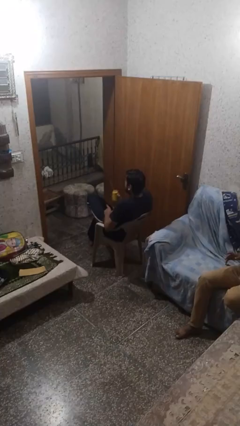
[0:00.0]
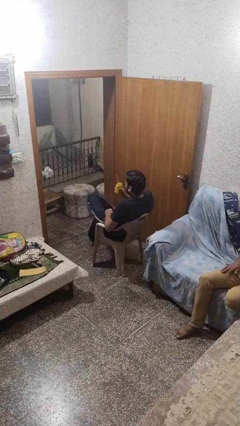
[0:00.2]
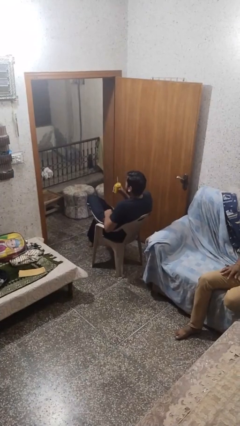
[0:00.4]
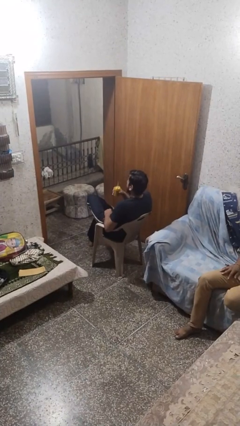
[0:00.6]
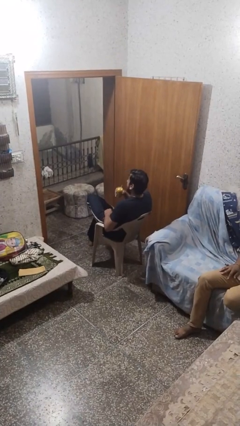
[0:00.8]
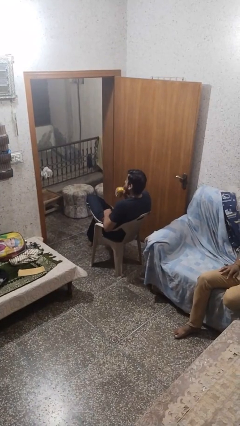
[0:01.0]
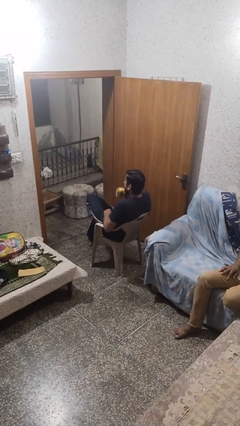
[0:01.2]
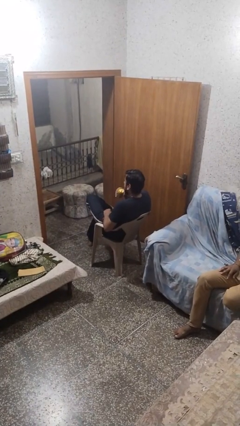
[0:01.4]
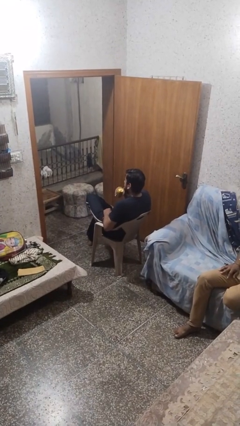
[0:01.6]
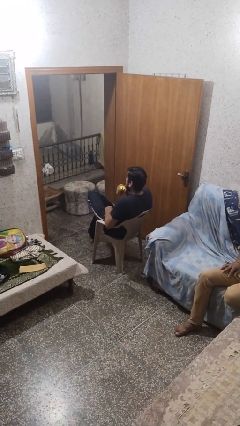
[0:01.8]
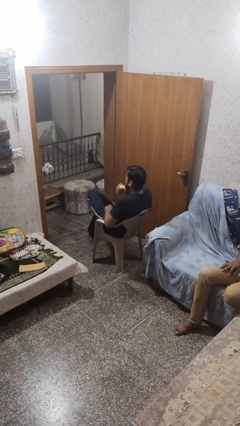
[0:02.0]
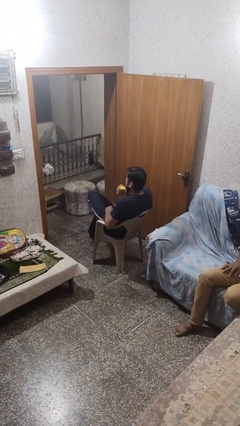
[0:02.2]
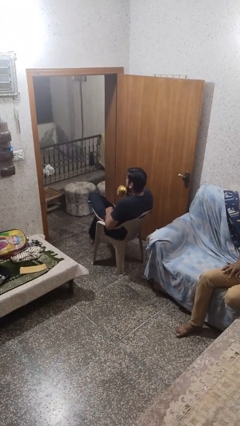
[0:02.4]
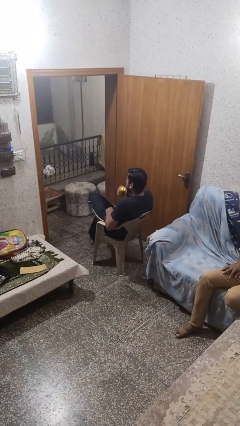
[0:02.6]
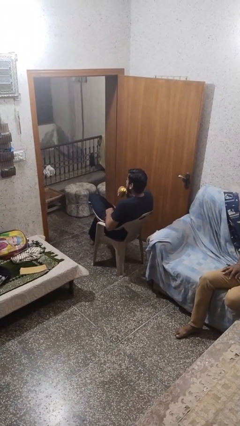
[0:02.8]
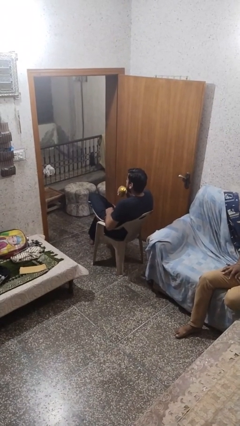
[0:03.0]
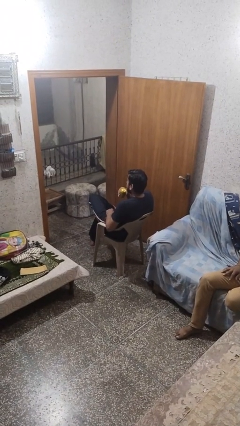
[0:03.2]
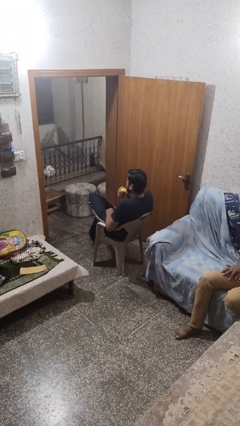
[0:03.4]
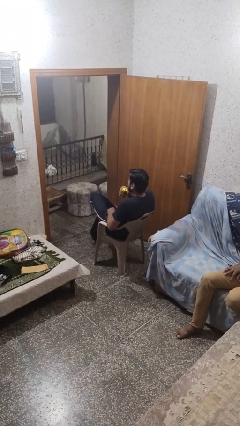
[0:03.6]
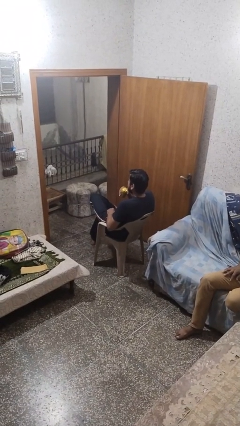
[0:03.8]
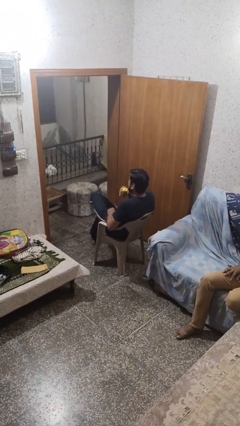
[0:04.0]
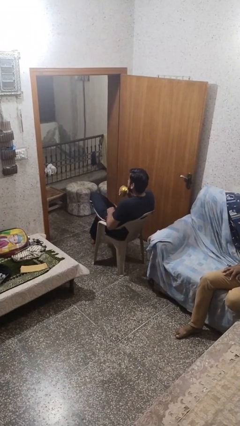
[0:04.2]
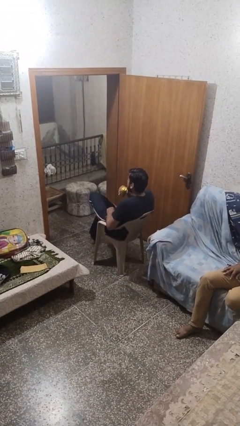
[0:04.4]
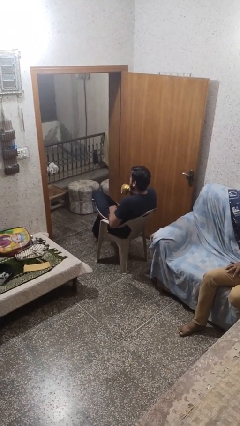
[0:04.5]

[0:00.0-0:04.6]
person drinks from straw

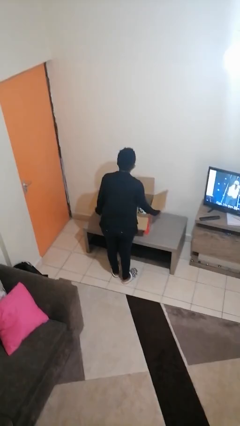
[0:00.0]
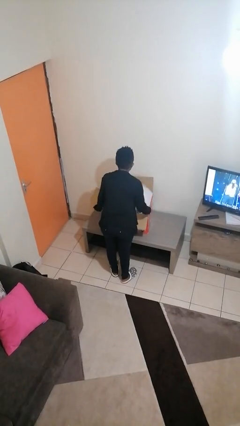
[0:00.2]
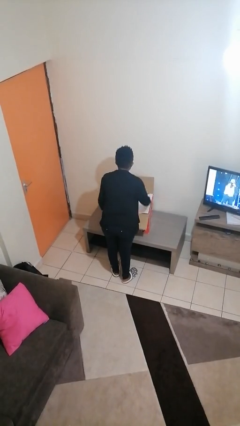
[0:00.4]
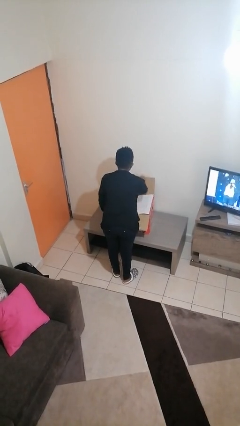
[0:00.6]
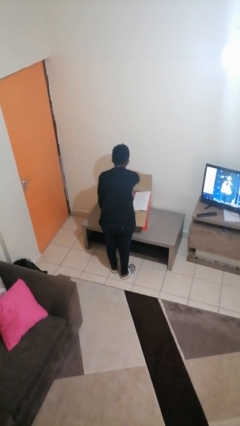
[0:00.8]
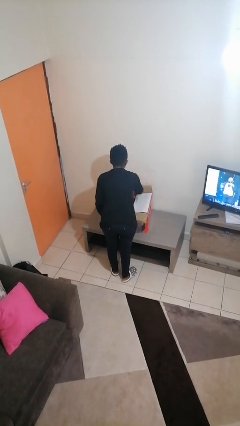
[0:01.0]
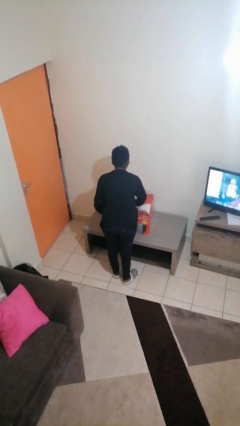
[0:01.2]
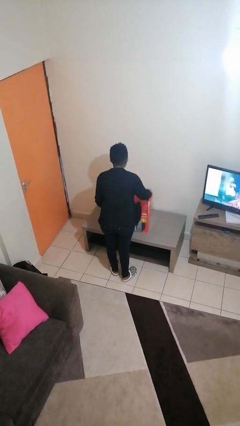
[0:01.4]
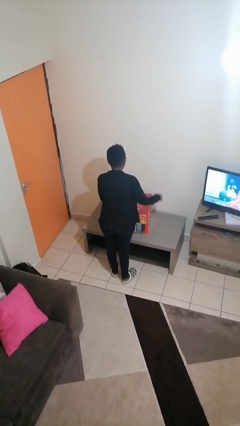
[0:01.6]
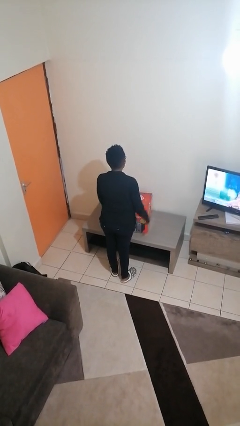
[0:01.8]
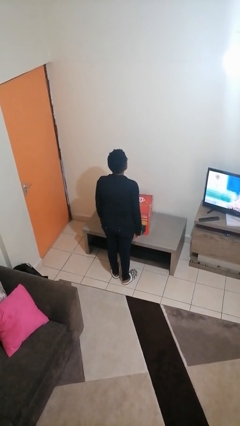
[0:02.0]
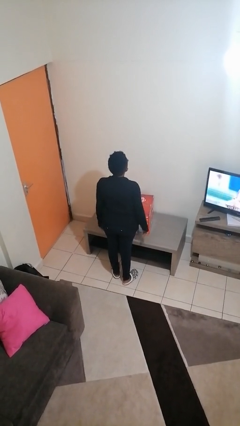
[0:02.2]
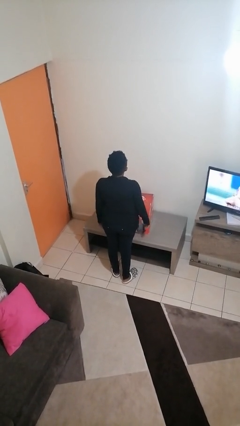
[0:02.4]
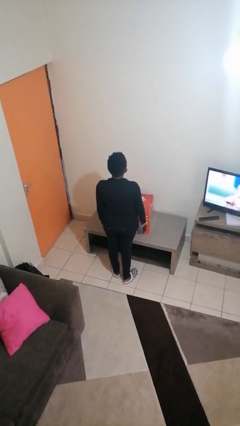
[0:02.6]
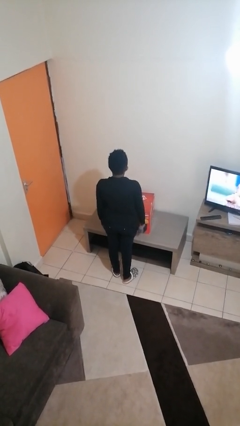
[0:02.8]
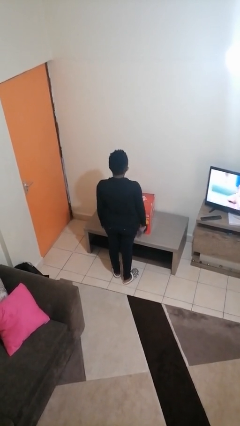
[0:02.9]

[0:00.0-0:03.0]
person closes box

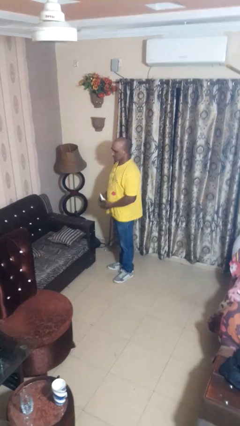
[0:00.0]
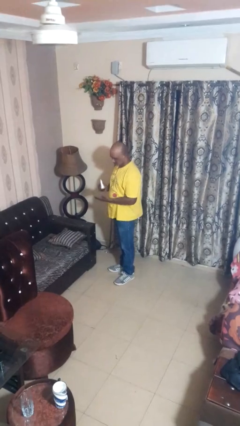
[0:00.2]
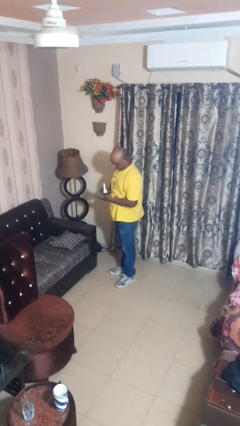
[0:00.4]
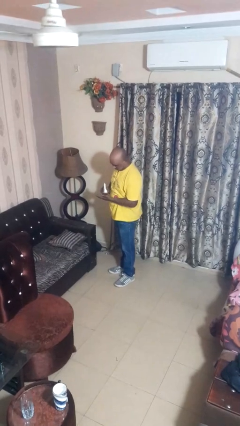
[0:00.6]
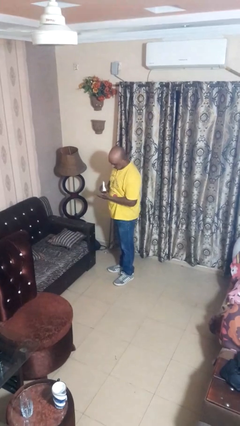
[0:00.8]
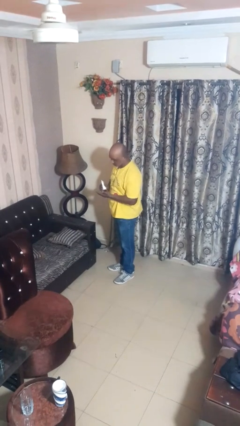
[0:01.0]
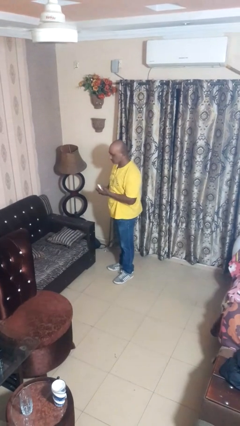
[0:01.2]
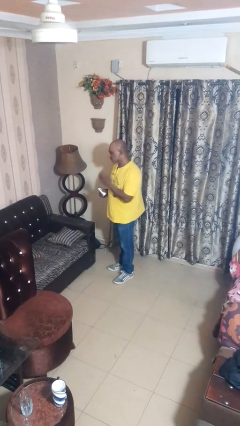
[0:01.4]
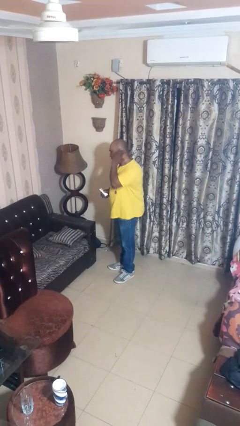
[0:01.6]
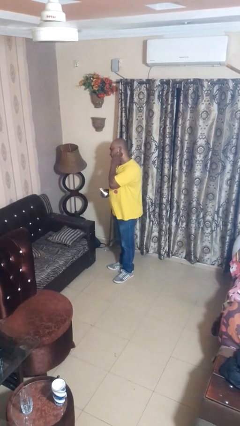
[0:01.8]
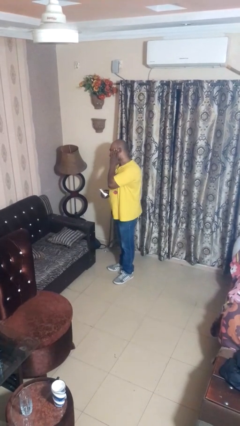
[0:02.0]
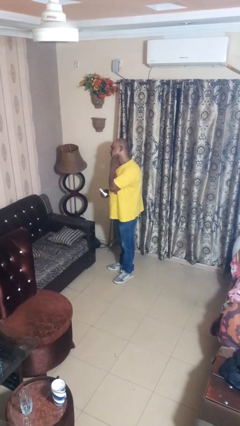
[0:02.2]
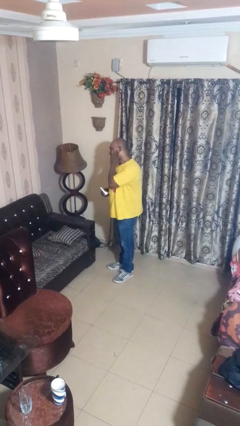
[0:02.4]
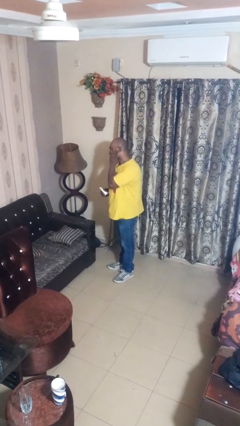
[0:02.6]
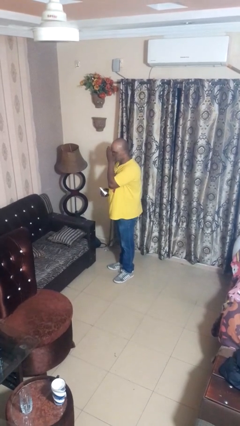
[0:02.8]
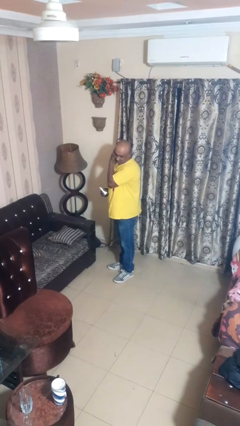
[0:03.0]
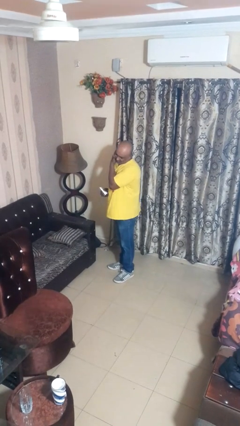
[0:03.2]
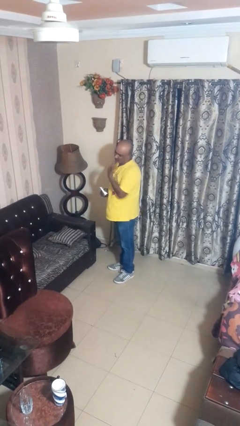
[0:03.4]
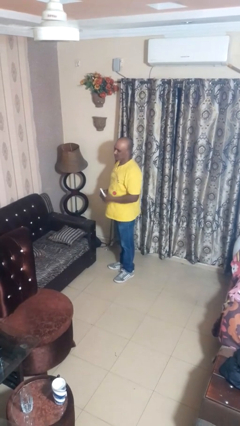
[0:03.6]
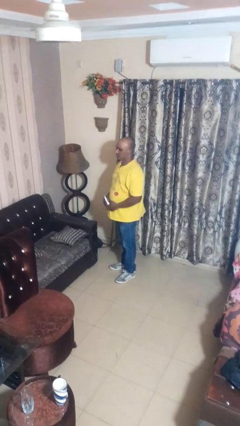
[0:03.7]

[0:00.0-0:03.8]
person applies facial moisturizer

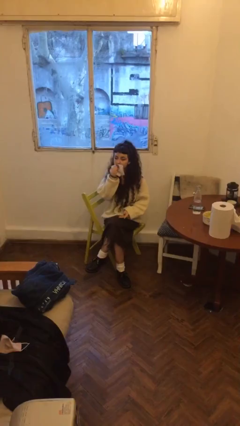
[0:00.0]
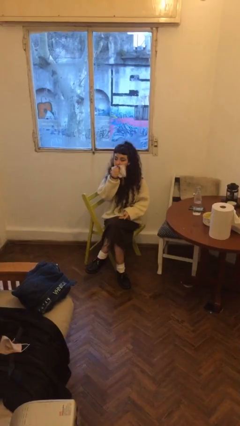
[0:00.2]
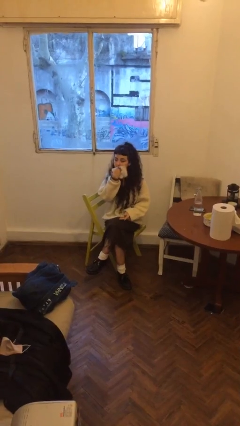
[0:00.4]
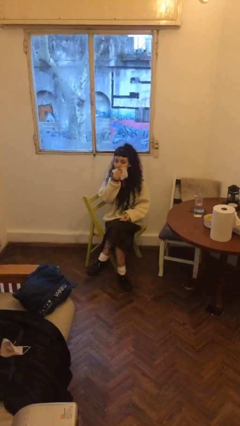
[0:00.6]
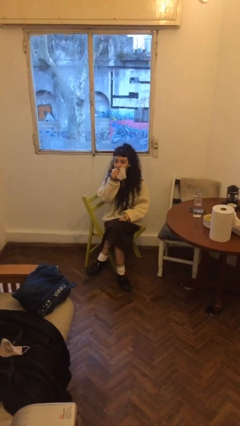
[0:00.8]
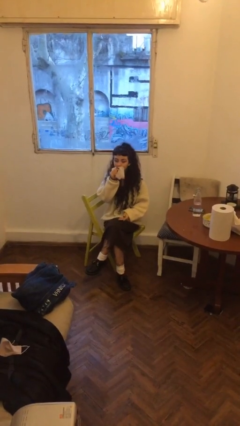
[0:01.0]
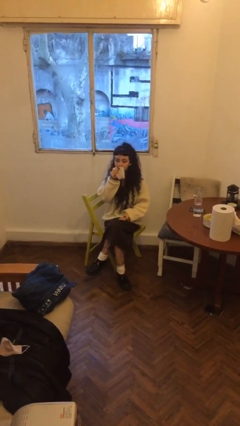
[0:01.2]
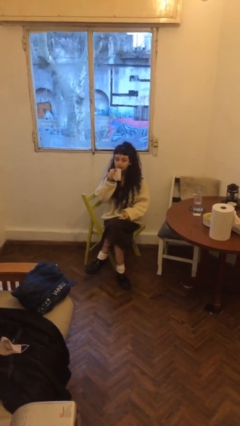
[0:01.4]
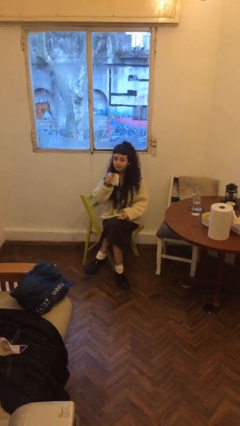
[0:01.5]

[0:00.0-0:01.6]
person wipes mouth with napkin

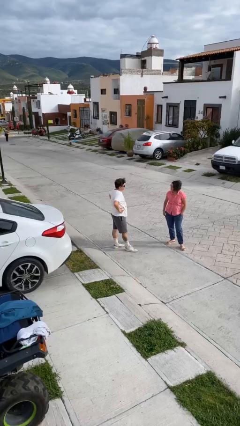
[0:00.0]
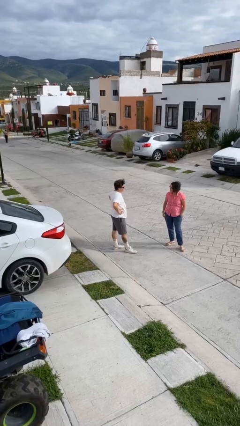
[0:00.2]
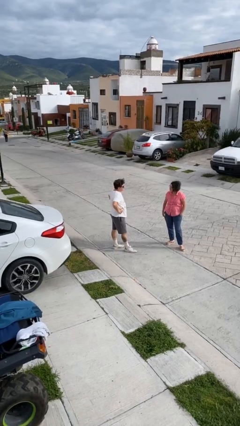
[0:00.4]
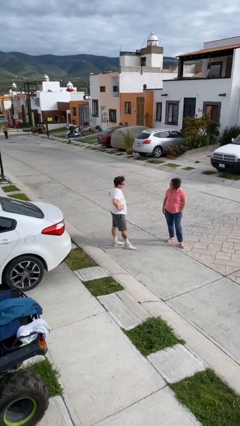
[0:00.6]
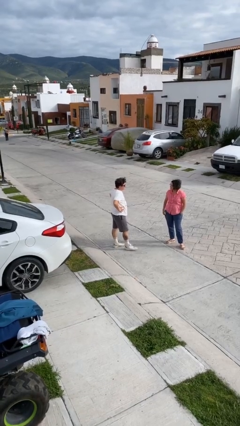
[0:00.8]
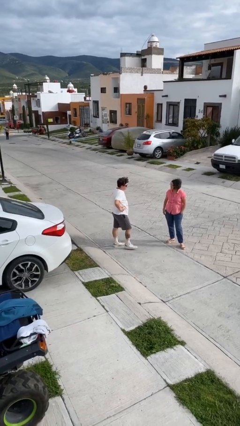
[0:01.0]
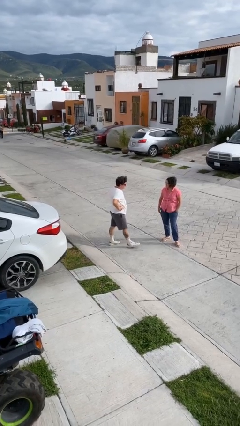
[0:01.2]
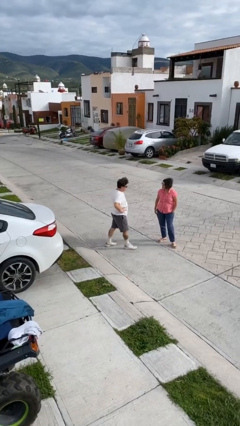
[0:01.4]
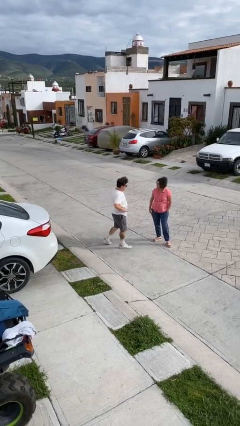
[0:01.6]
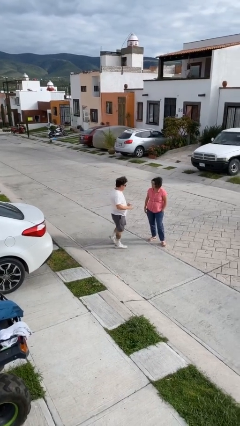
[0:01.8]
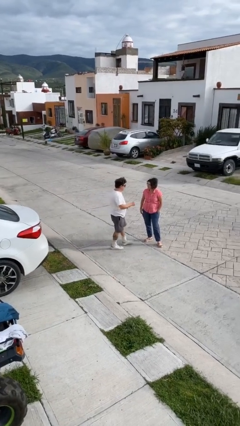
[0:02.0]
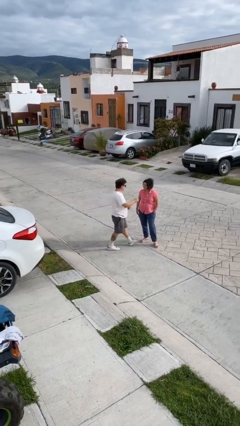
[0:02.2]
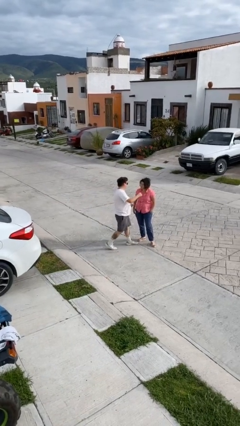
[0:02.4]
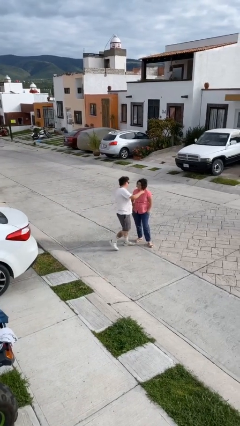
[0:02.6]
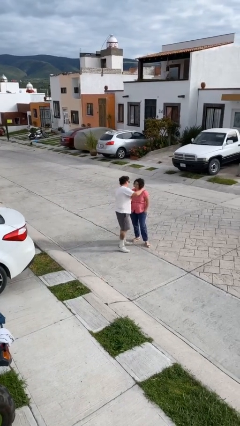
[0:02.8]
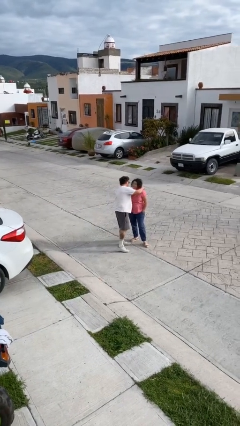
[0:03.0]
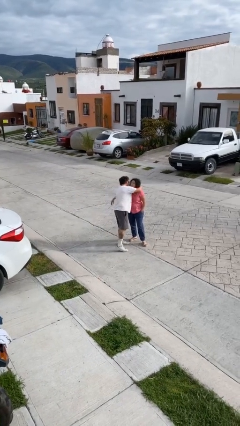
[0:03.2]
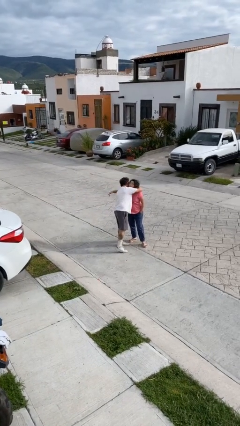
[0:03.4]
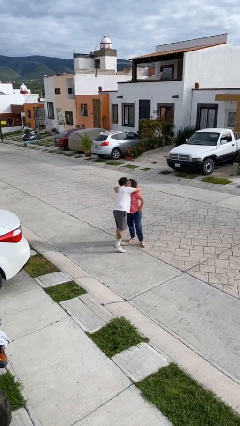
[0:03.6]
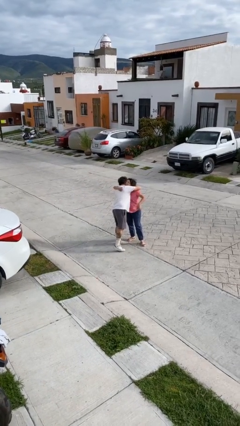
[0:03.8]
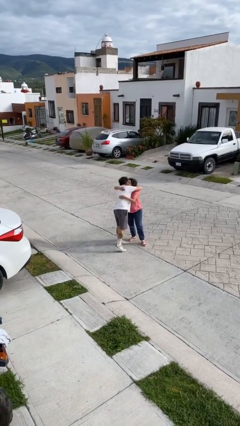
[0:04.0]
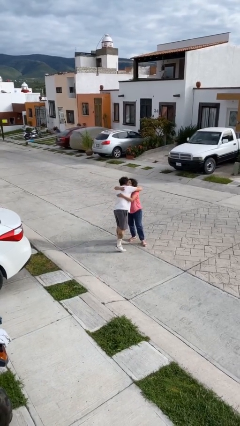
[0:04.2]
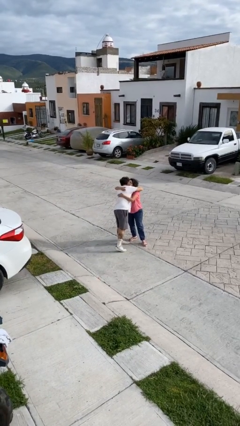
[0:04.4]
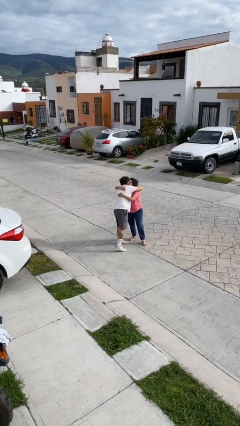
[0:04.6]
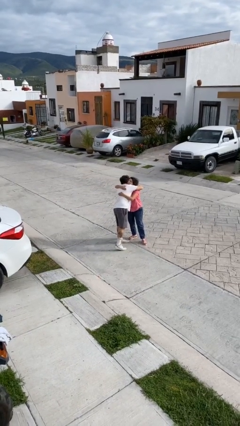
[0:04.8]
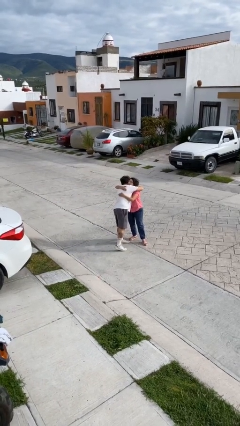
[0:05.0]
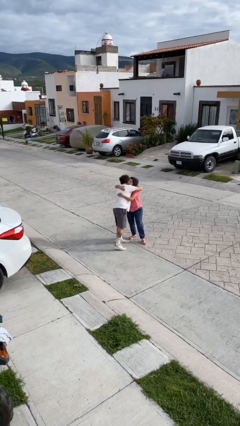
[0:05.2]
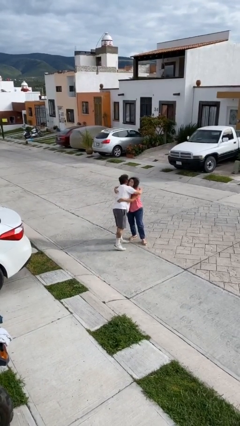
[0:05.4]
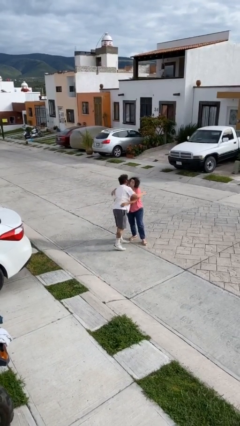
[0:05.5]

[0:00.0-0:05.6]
person embraces person
